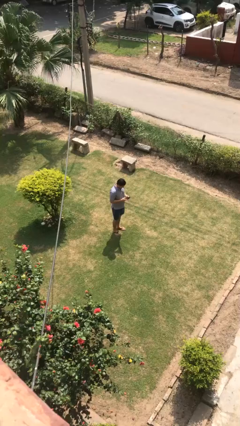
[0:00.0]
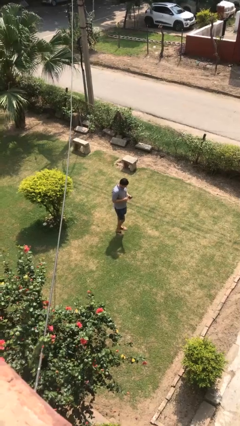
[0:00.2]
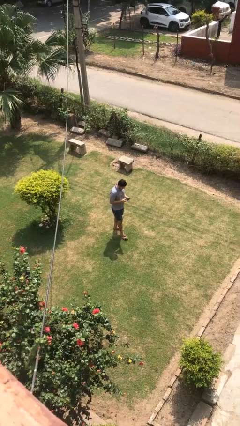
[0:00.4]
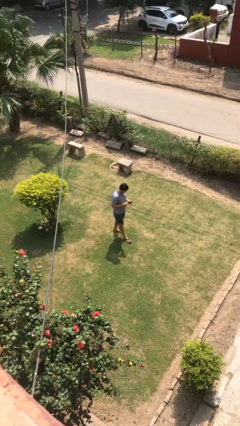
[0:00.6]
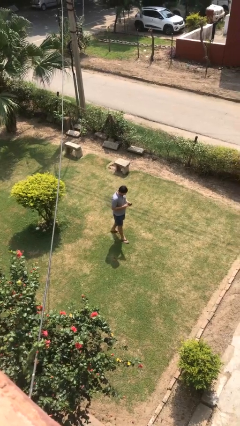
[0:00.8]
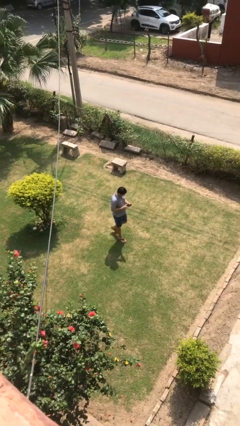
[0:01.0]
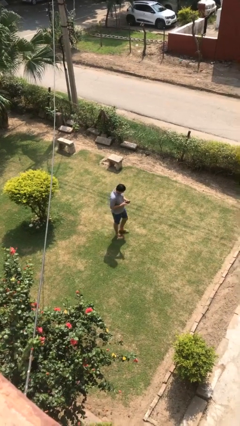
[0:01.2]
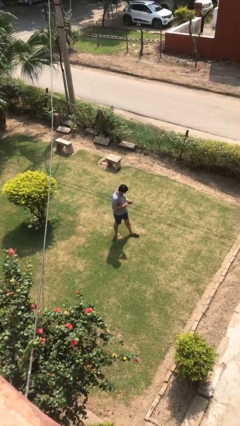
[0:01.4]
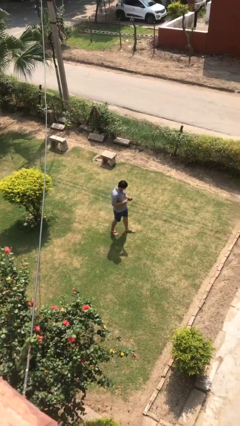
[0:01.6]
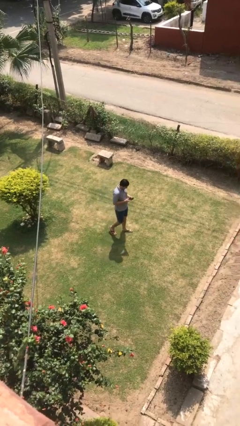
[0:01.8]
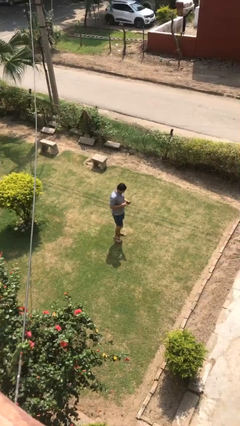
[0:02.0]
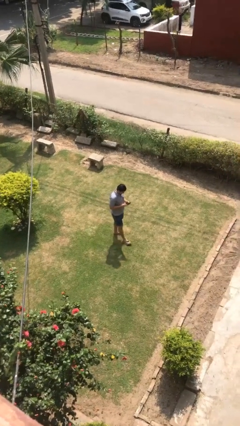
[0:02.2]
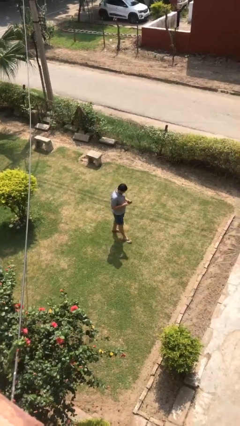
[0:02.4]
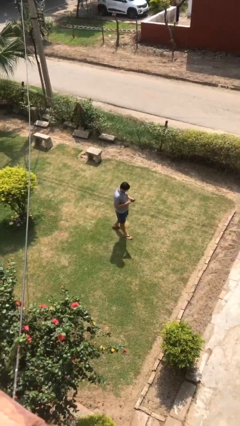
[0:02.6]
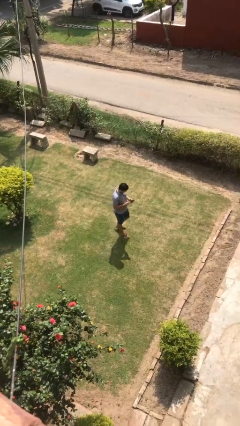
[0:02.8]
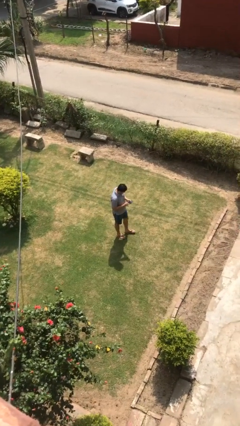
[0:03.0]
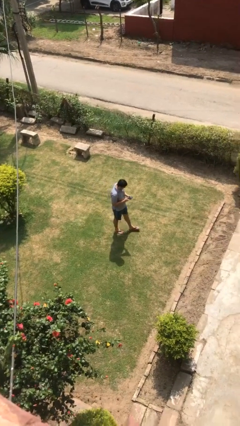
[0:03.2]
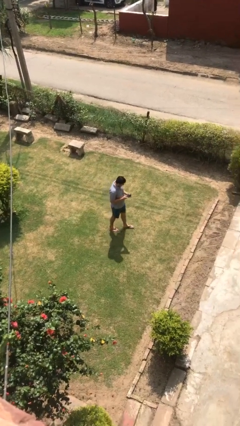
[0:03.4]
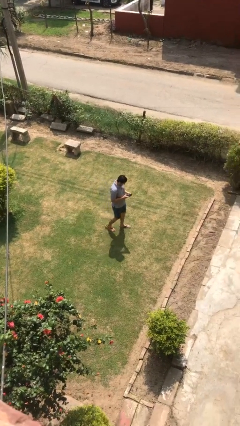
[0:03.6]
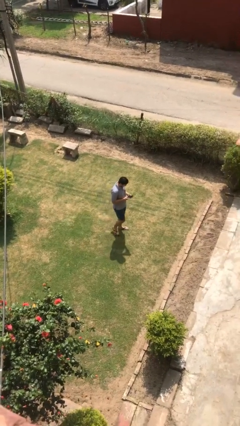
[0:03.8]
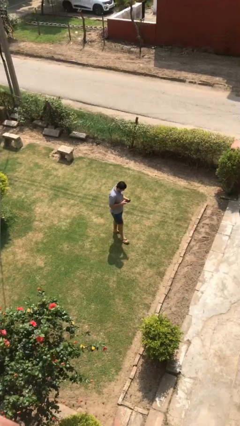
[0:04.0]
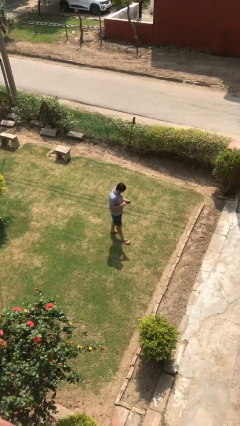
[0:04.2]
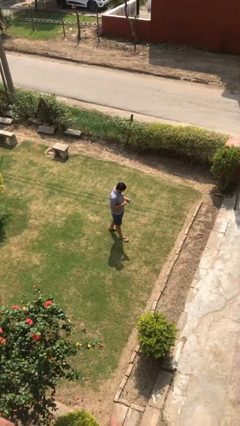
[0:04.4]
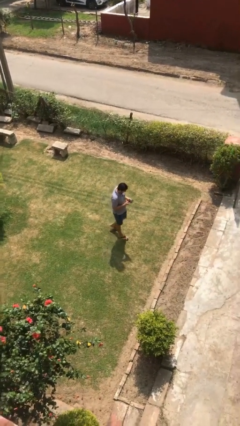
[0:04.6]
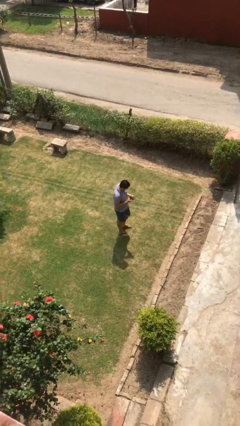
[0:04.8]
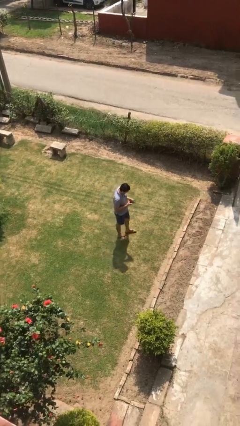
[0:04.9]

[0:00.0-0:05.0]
person texts on phone

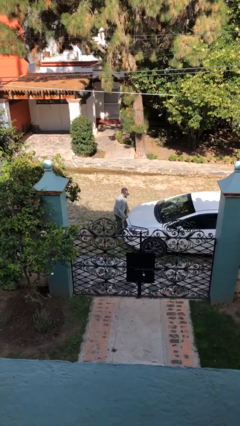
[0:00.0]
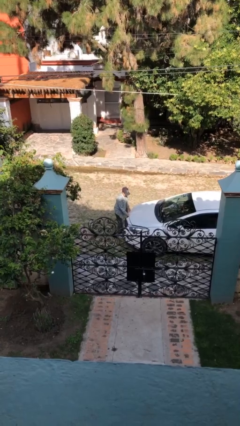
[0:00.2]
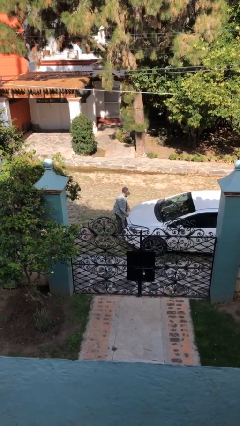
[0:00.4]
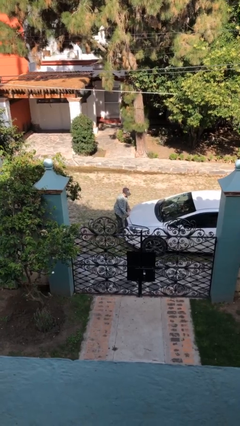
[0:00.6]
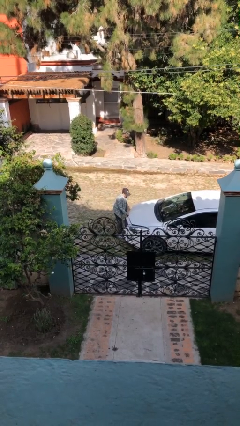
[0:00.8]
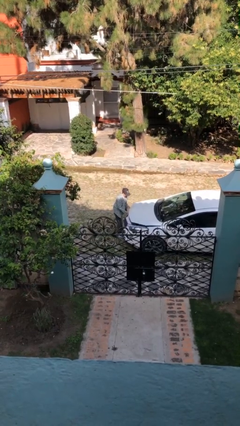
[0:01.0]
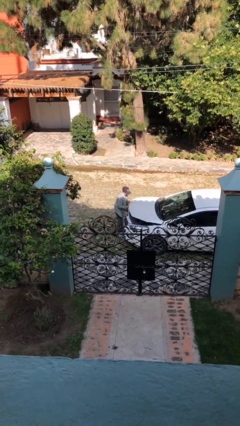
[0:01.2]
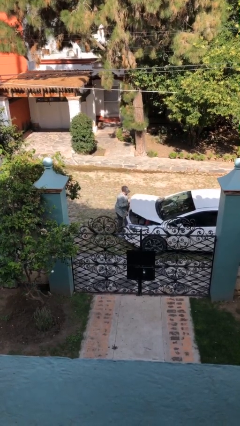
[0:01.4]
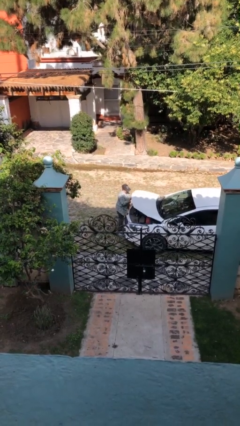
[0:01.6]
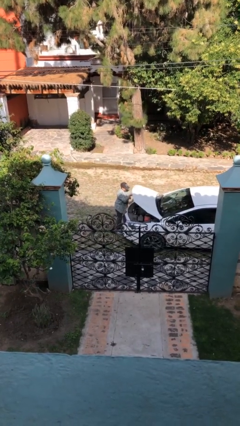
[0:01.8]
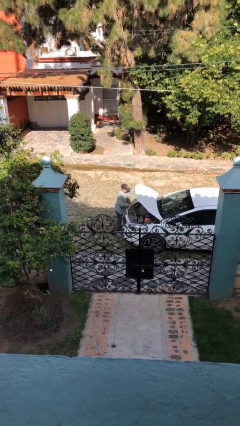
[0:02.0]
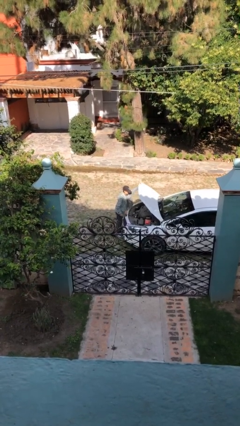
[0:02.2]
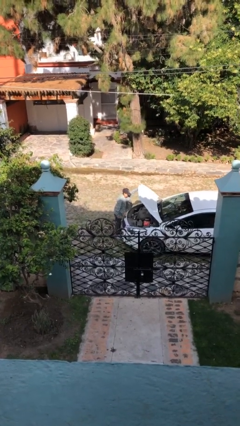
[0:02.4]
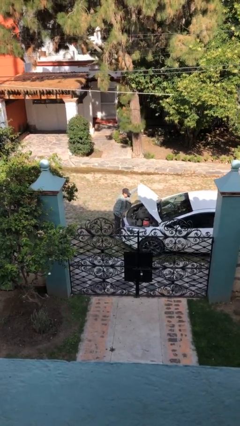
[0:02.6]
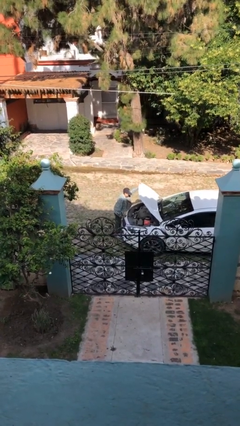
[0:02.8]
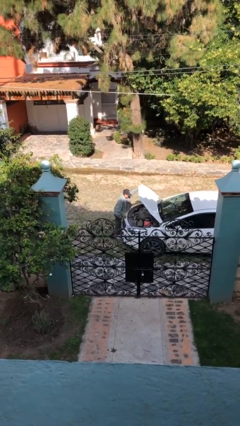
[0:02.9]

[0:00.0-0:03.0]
person opens car hood

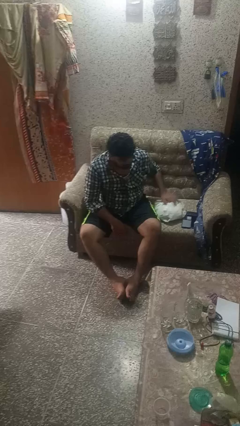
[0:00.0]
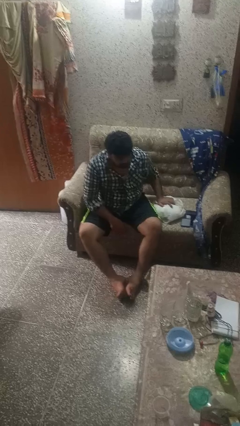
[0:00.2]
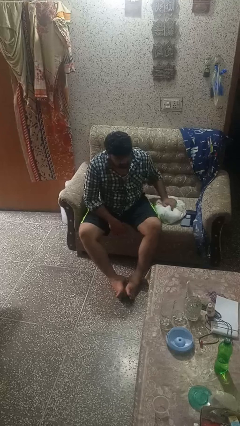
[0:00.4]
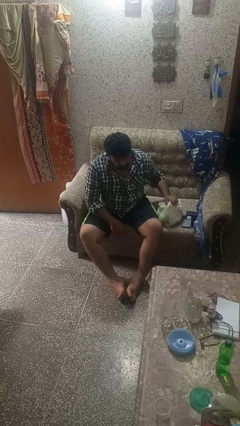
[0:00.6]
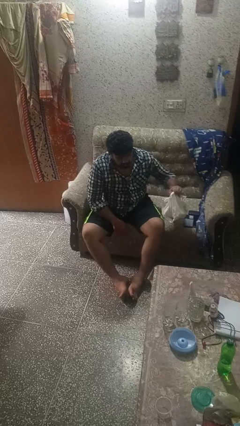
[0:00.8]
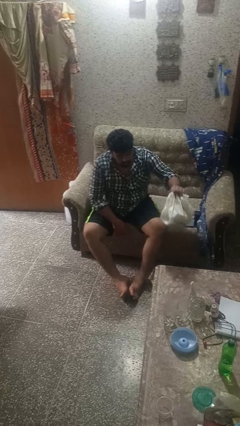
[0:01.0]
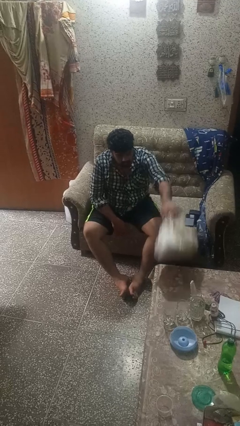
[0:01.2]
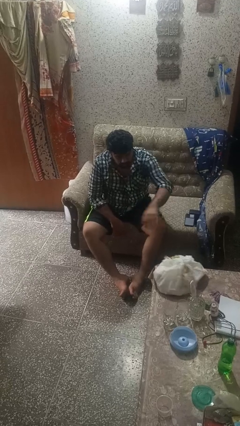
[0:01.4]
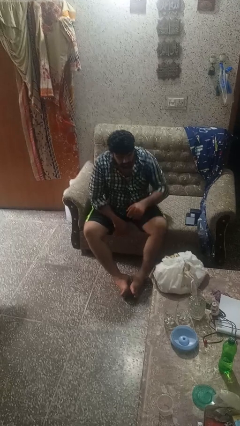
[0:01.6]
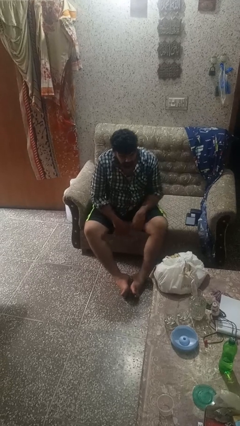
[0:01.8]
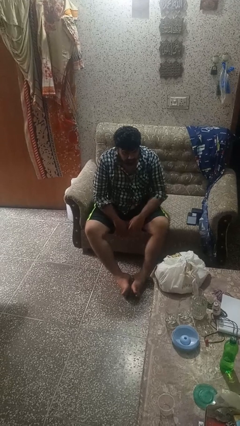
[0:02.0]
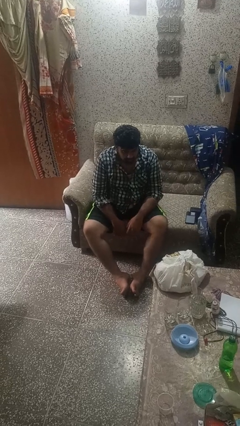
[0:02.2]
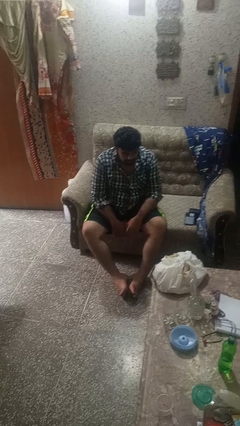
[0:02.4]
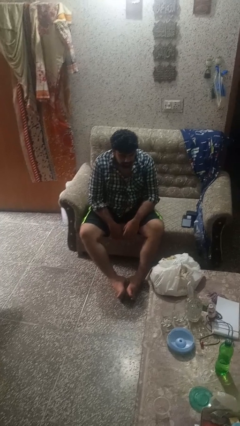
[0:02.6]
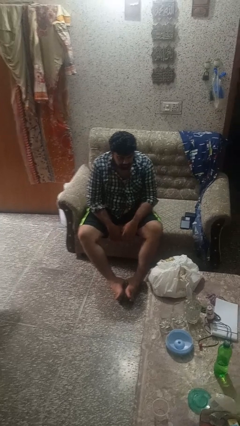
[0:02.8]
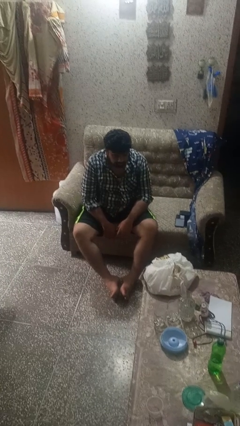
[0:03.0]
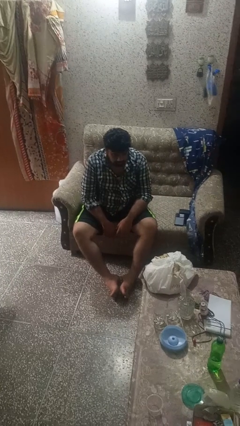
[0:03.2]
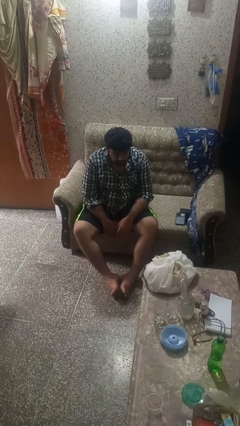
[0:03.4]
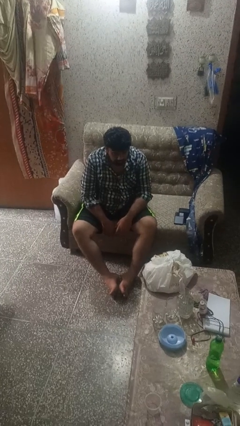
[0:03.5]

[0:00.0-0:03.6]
person throws object on table

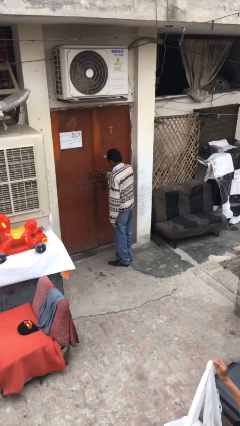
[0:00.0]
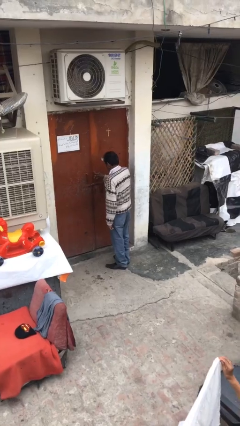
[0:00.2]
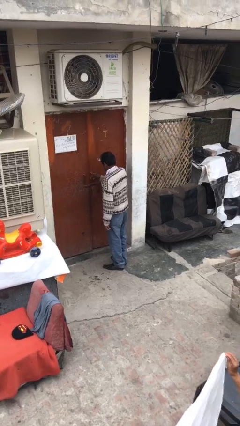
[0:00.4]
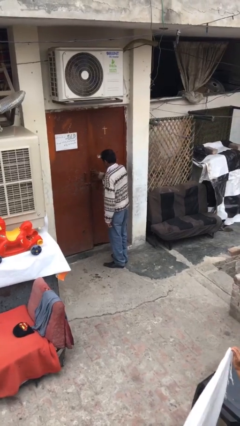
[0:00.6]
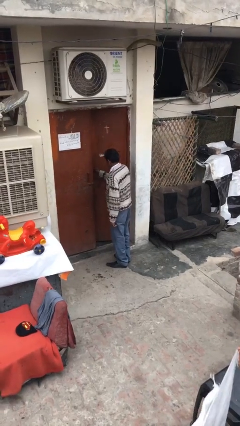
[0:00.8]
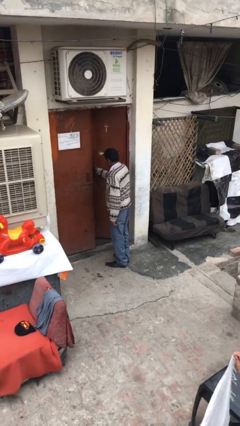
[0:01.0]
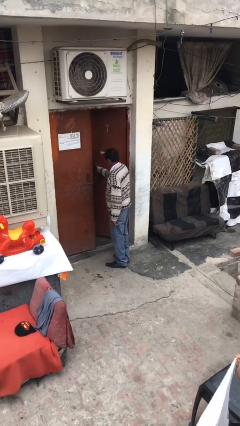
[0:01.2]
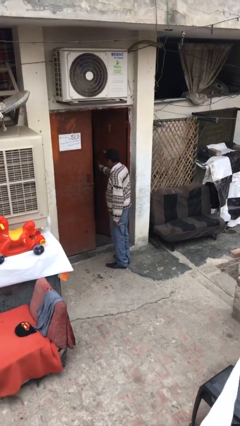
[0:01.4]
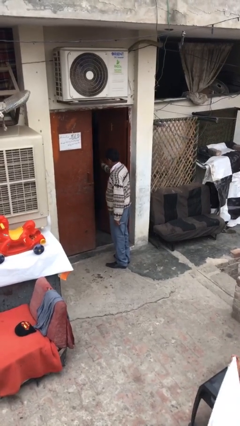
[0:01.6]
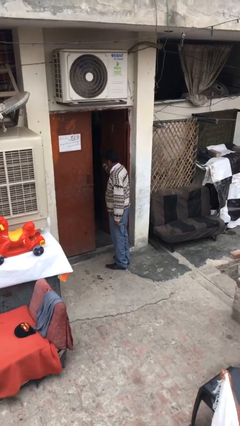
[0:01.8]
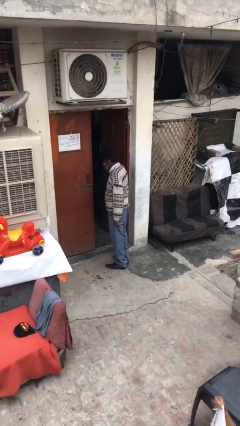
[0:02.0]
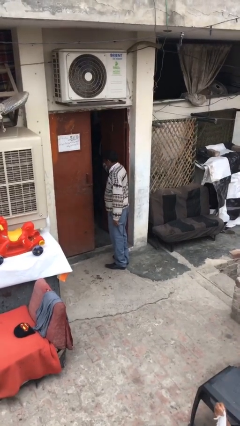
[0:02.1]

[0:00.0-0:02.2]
person opens facility door

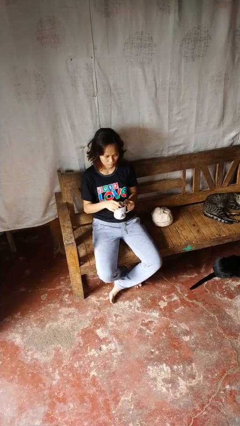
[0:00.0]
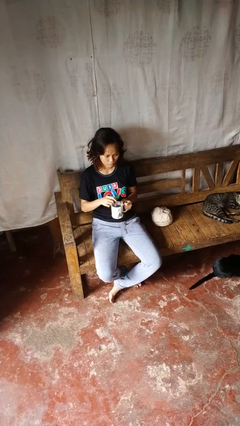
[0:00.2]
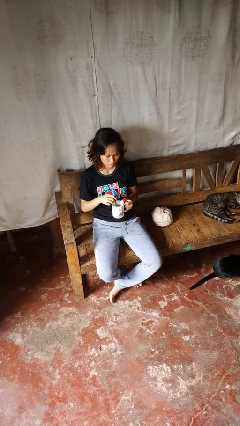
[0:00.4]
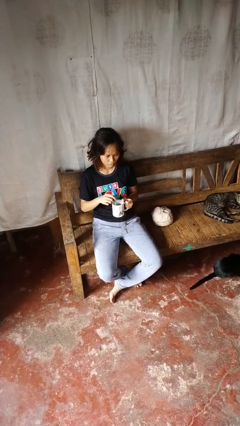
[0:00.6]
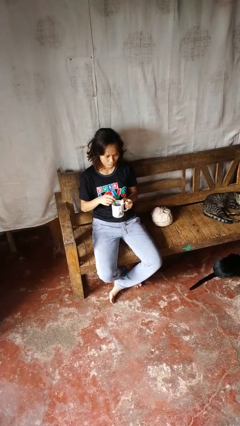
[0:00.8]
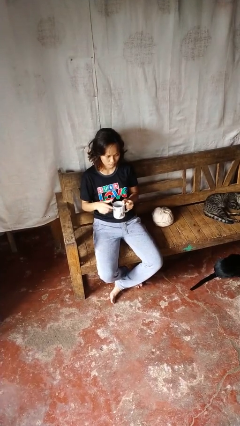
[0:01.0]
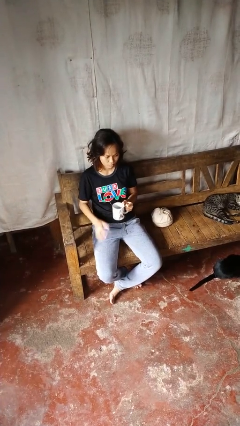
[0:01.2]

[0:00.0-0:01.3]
person stirs mug

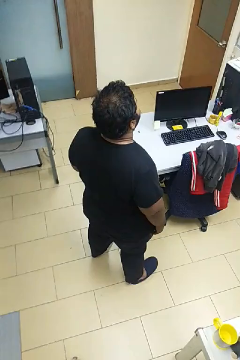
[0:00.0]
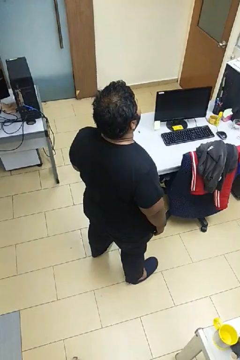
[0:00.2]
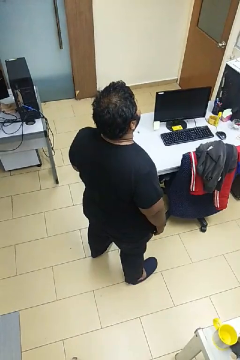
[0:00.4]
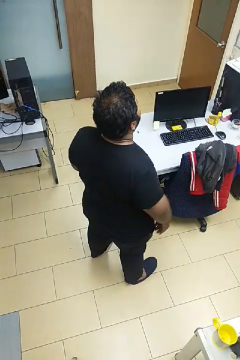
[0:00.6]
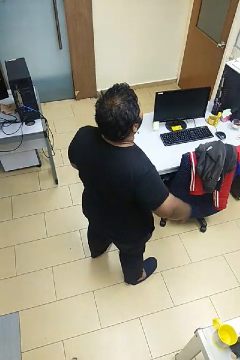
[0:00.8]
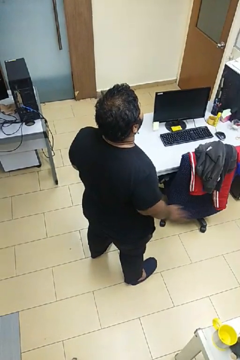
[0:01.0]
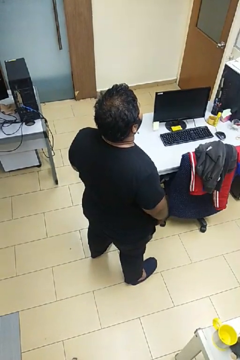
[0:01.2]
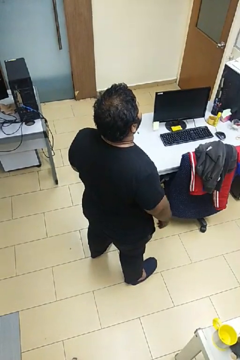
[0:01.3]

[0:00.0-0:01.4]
person slaps hands on thighs

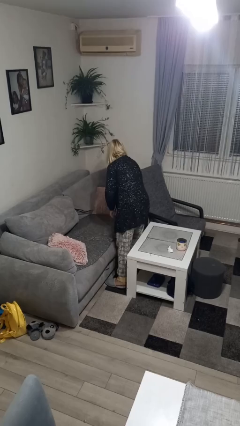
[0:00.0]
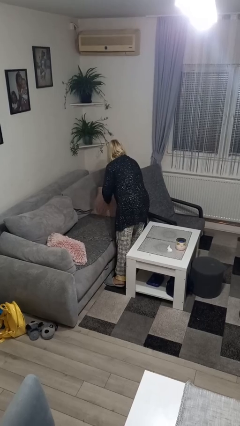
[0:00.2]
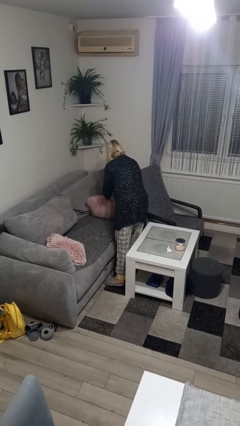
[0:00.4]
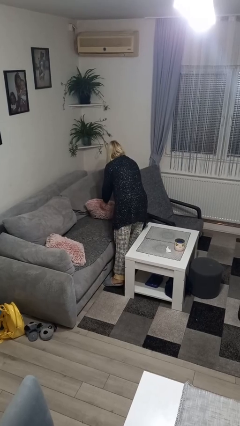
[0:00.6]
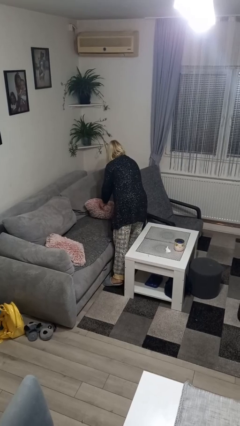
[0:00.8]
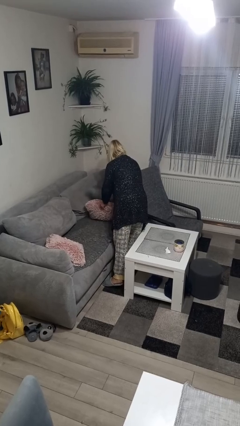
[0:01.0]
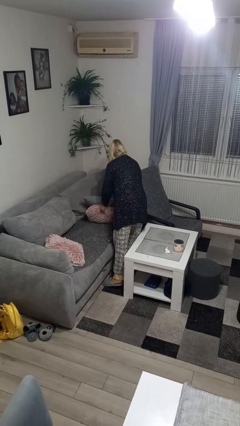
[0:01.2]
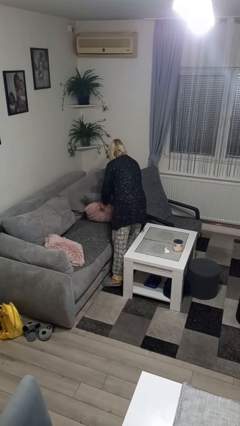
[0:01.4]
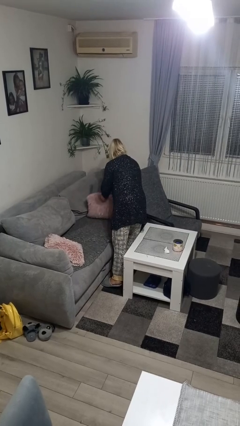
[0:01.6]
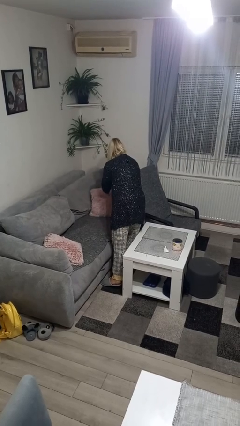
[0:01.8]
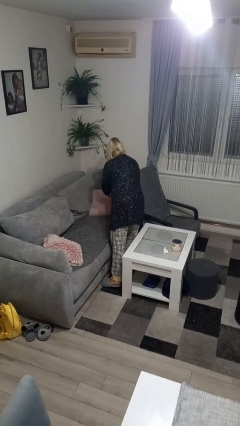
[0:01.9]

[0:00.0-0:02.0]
person searches in couch
